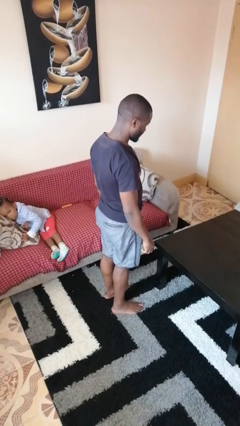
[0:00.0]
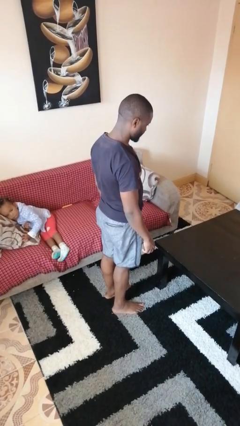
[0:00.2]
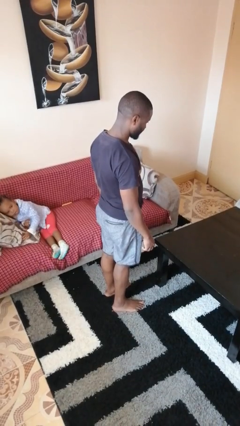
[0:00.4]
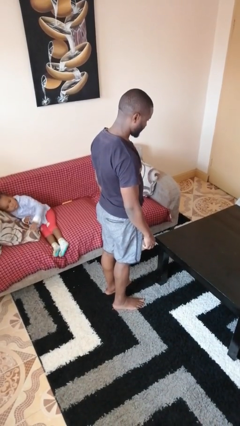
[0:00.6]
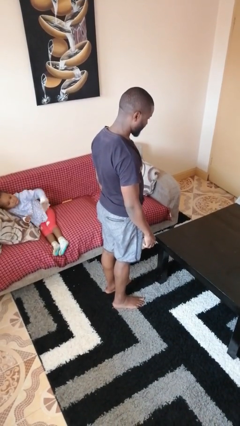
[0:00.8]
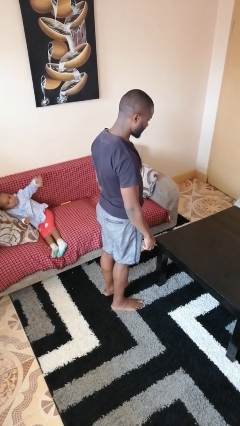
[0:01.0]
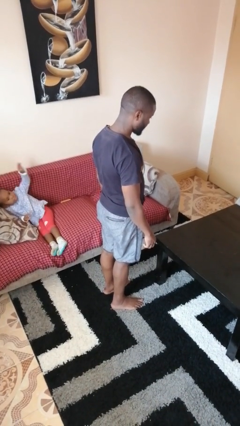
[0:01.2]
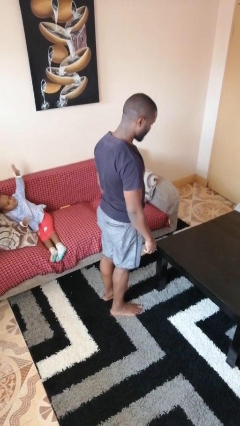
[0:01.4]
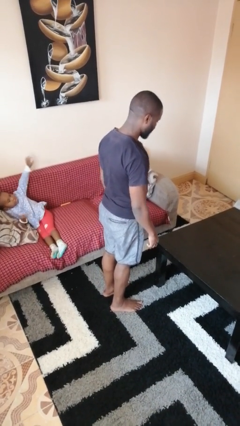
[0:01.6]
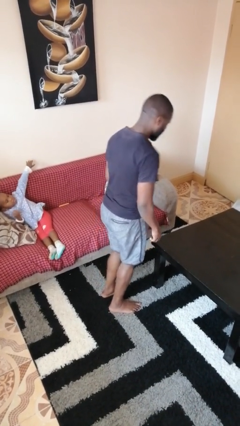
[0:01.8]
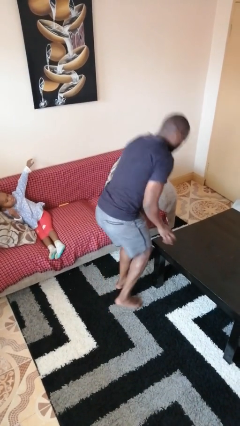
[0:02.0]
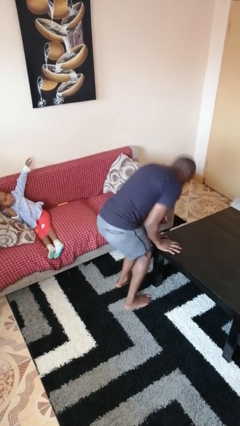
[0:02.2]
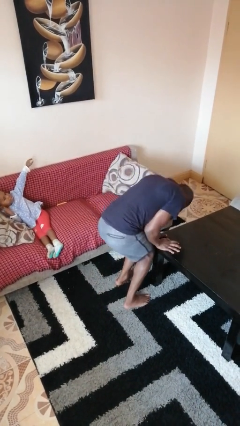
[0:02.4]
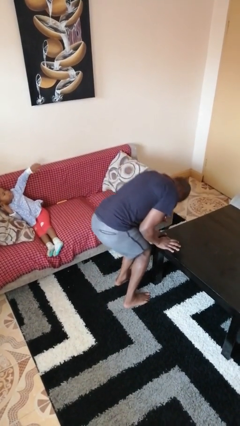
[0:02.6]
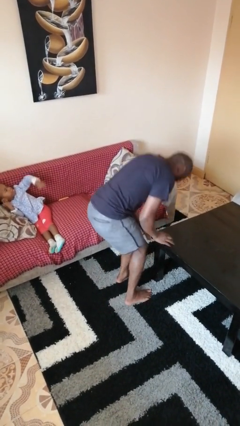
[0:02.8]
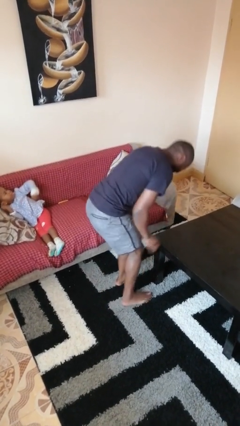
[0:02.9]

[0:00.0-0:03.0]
person bumps into table

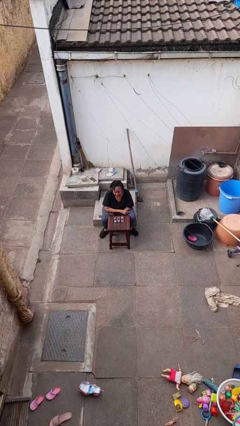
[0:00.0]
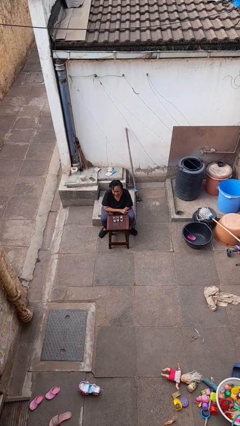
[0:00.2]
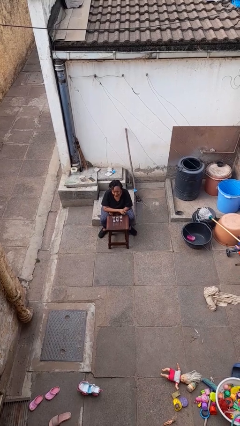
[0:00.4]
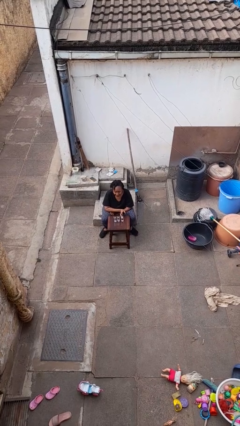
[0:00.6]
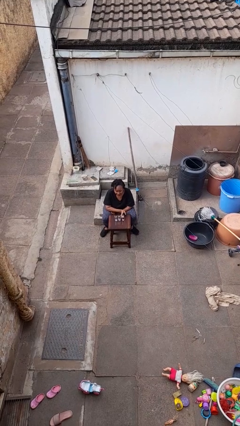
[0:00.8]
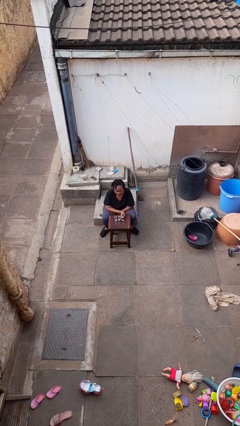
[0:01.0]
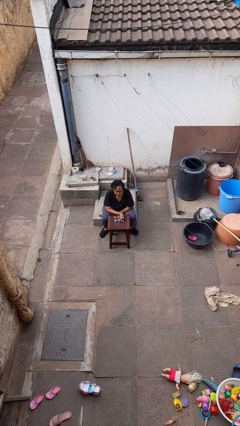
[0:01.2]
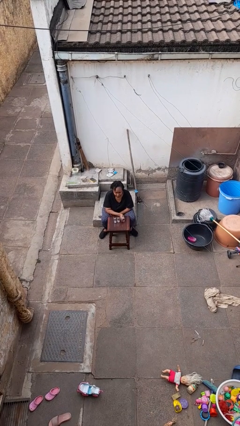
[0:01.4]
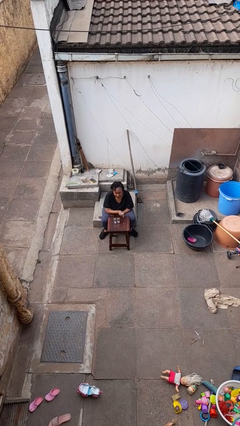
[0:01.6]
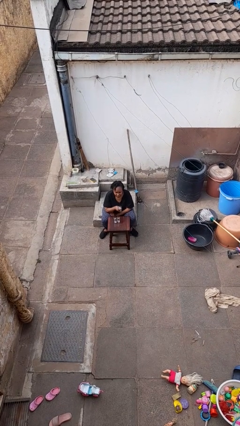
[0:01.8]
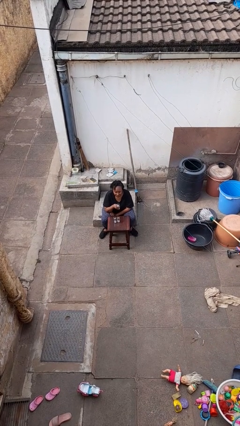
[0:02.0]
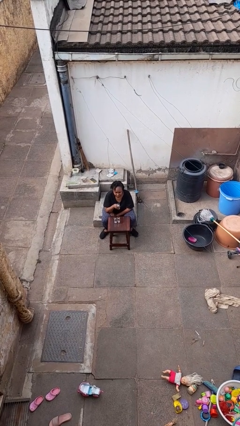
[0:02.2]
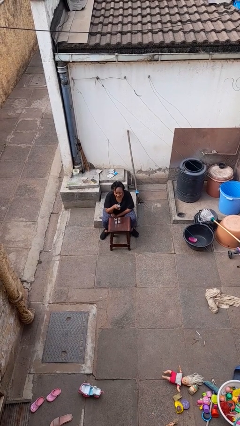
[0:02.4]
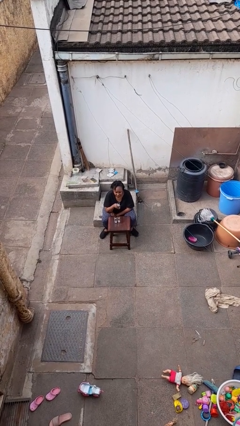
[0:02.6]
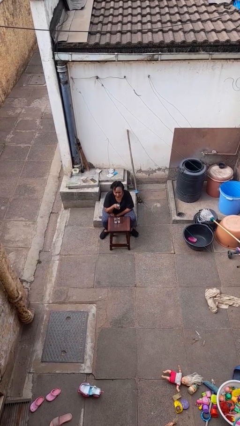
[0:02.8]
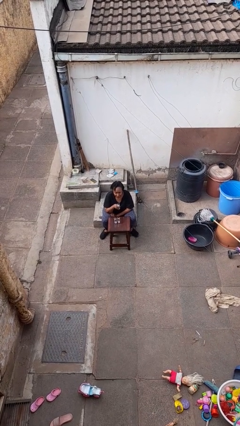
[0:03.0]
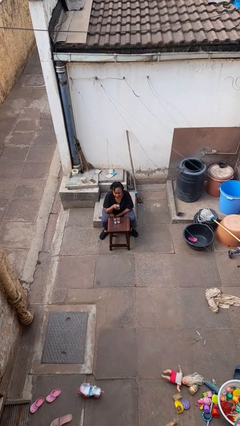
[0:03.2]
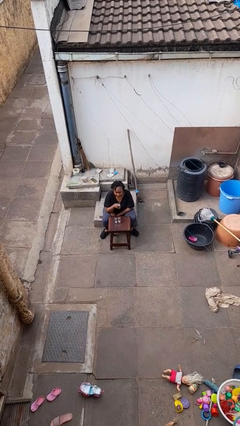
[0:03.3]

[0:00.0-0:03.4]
person picks up object from table

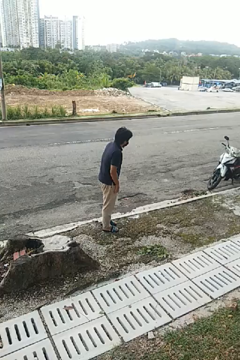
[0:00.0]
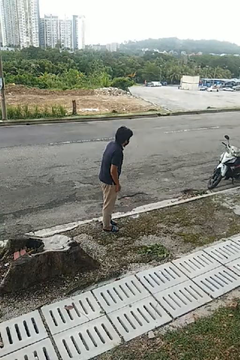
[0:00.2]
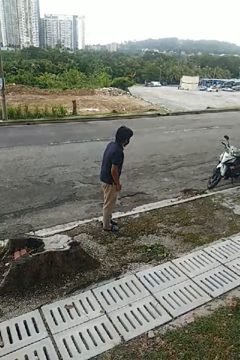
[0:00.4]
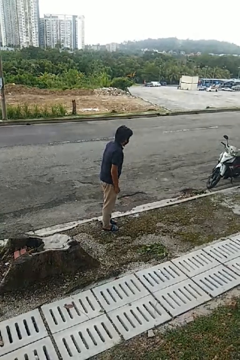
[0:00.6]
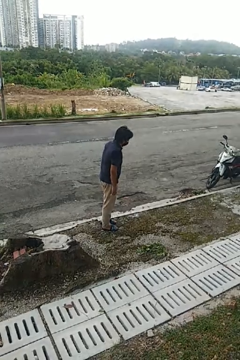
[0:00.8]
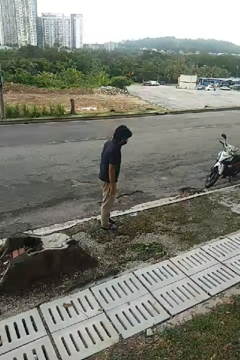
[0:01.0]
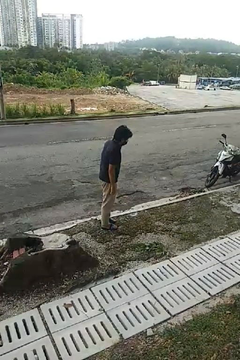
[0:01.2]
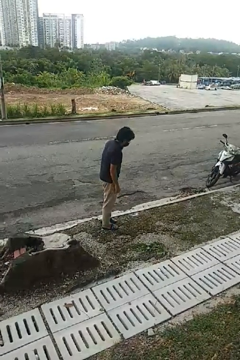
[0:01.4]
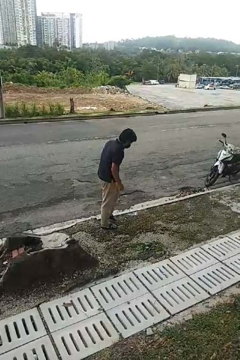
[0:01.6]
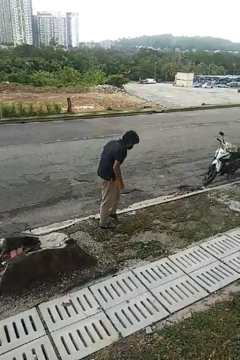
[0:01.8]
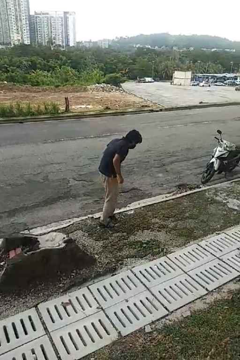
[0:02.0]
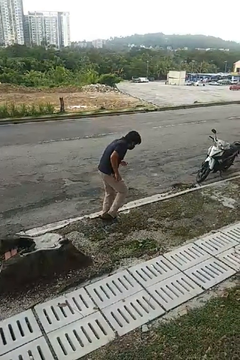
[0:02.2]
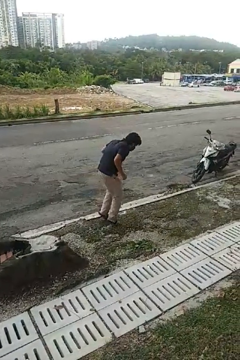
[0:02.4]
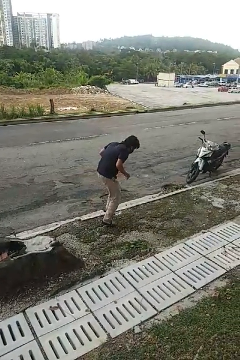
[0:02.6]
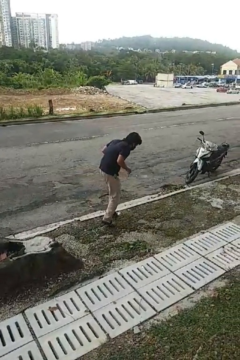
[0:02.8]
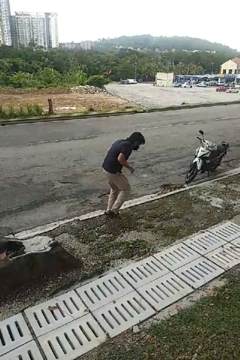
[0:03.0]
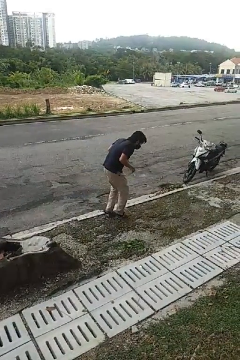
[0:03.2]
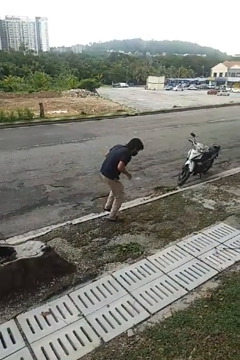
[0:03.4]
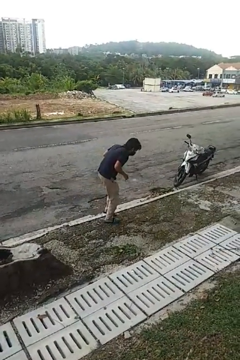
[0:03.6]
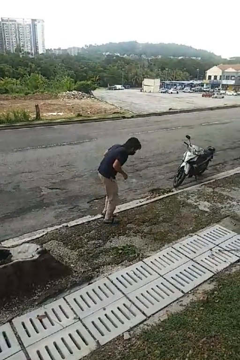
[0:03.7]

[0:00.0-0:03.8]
person walks tiptoe

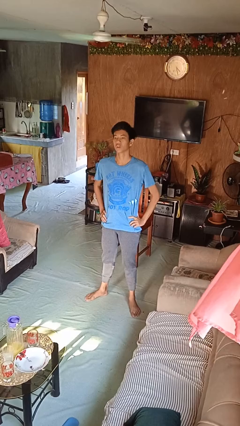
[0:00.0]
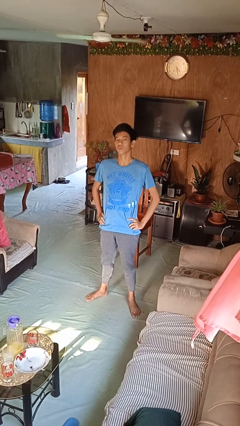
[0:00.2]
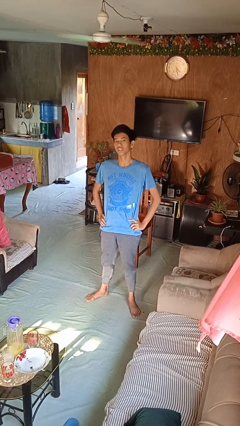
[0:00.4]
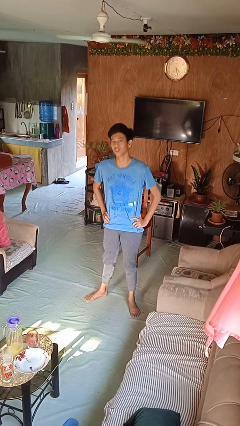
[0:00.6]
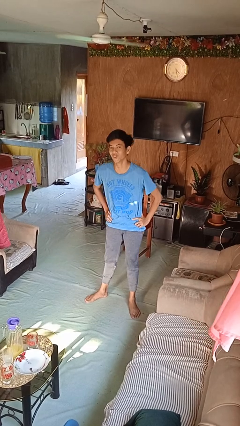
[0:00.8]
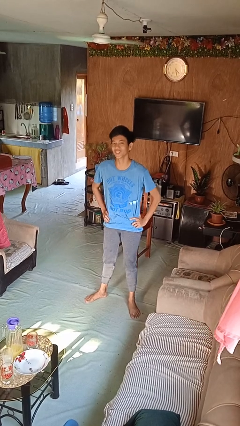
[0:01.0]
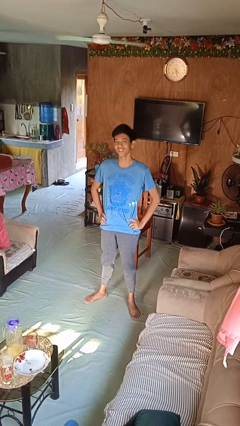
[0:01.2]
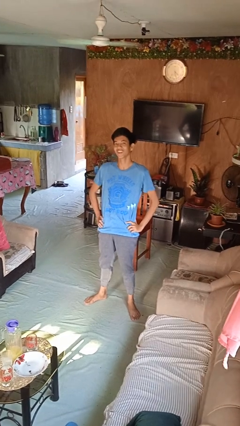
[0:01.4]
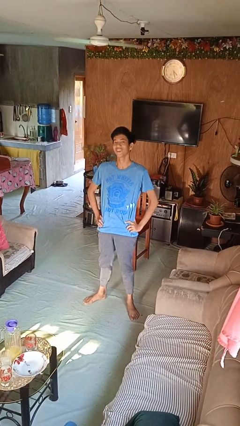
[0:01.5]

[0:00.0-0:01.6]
person wiggles hips

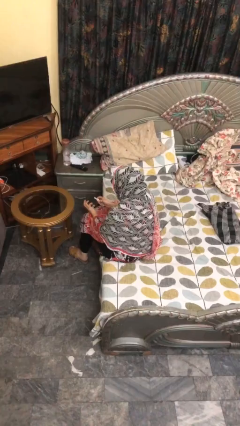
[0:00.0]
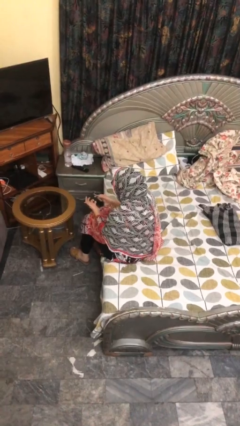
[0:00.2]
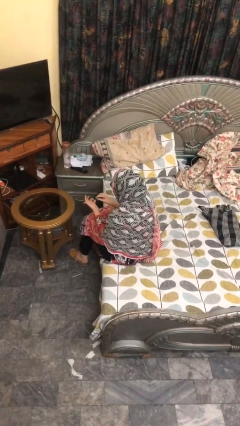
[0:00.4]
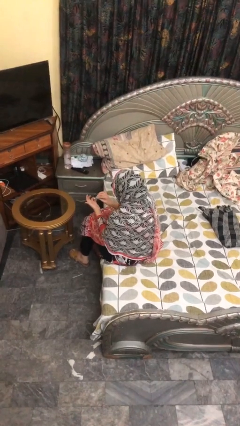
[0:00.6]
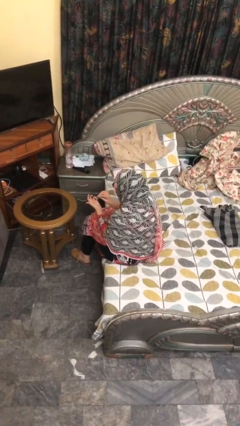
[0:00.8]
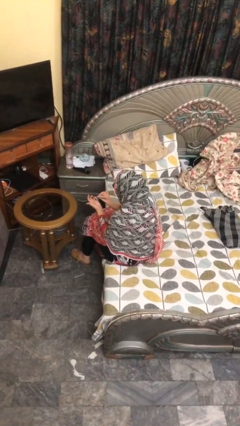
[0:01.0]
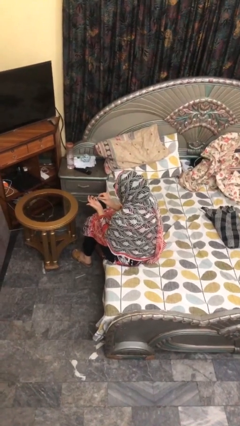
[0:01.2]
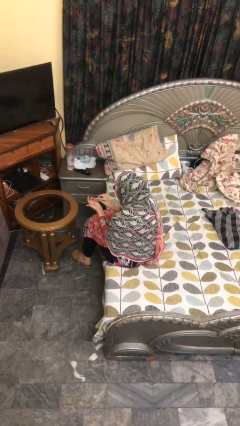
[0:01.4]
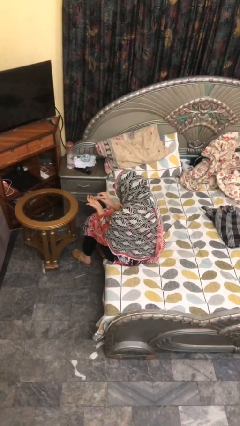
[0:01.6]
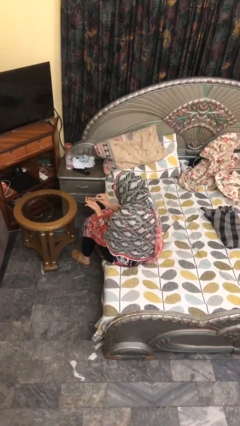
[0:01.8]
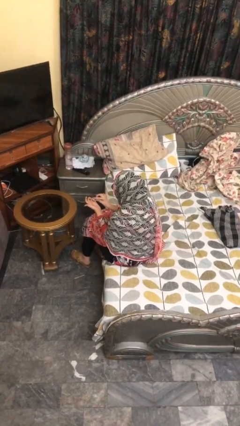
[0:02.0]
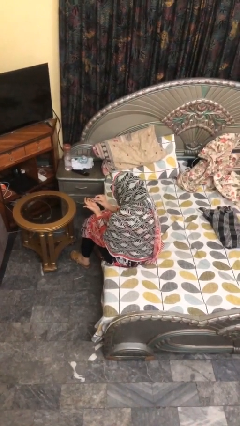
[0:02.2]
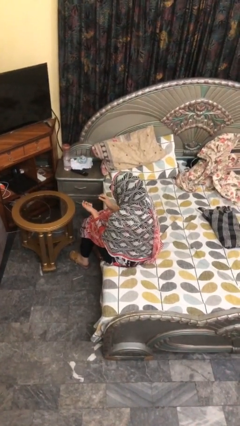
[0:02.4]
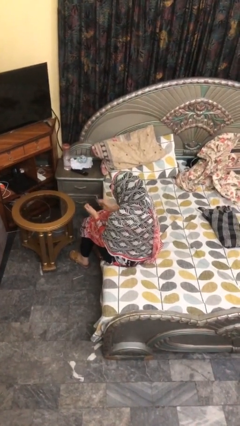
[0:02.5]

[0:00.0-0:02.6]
person files fingernails

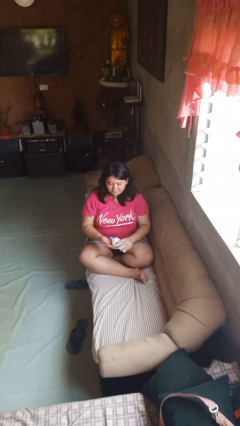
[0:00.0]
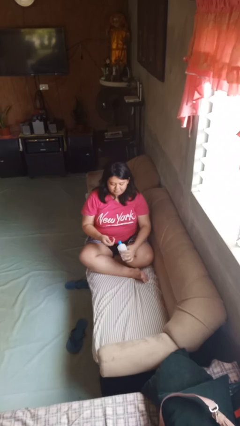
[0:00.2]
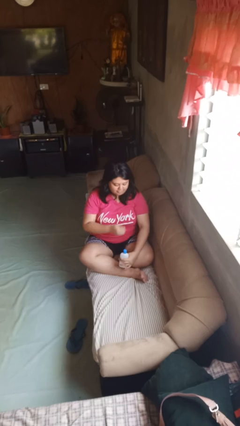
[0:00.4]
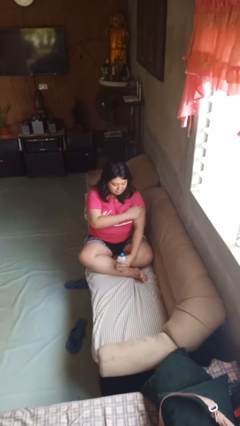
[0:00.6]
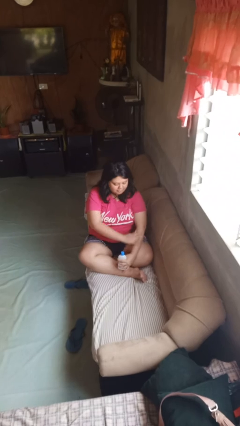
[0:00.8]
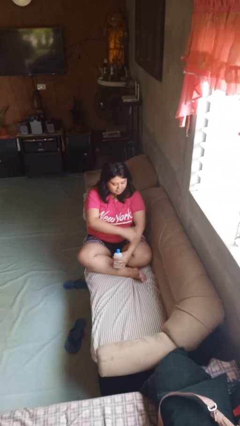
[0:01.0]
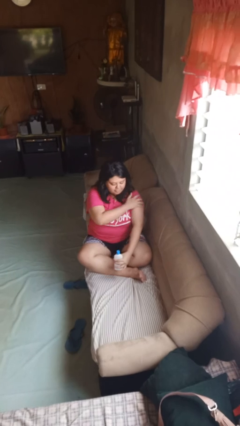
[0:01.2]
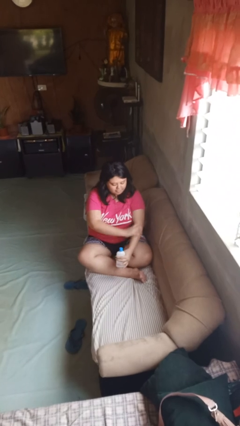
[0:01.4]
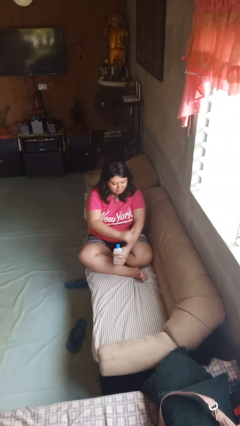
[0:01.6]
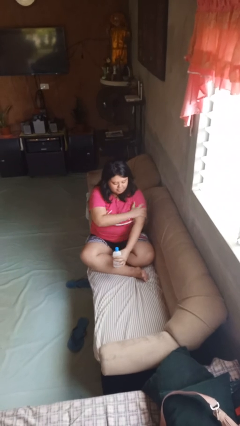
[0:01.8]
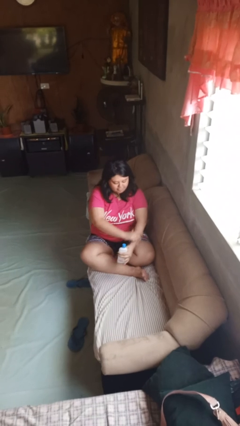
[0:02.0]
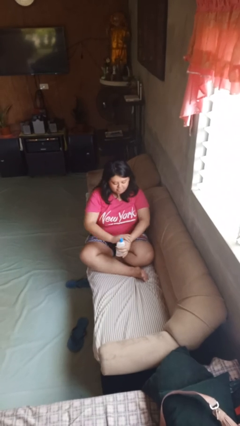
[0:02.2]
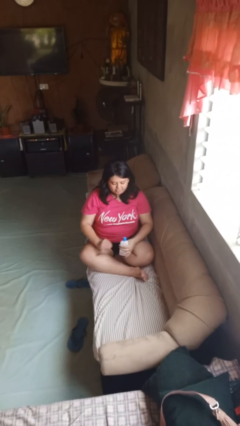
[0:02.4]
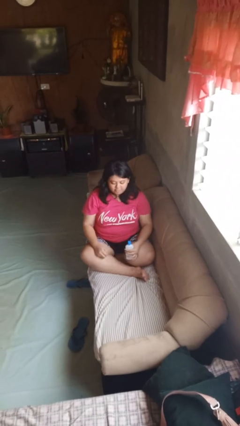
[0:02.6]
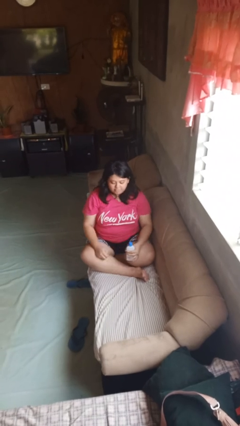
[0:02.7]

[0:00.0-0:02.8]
person applies sunscreen

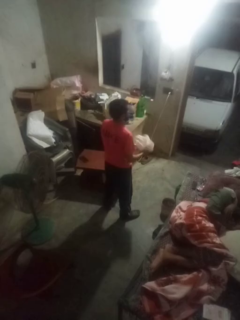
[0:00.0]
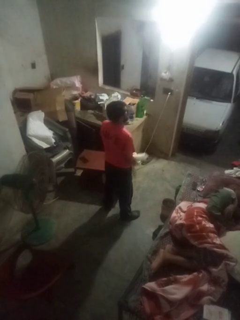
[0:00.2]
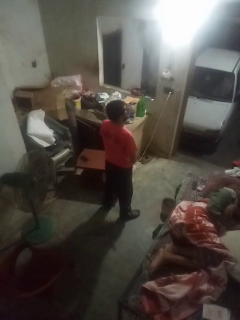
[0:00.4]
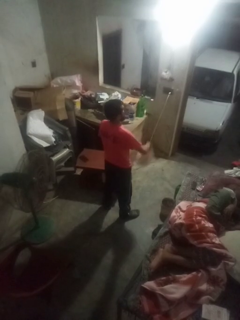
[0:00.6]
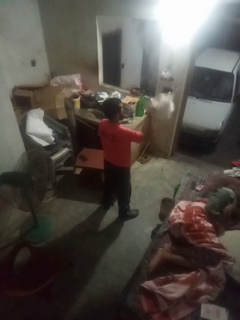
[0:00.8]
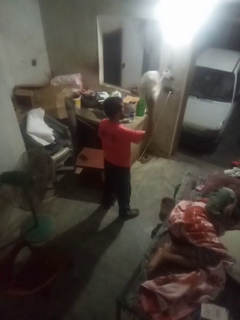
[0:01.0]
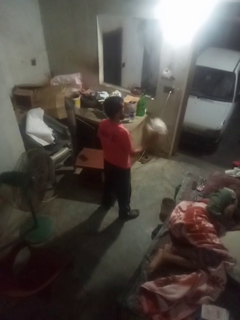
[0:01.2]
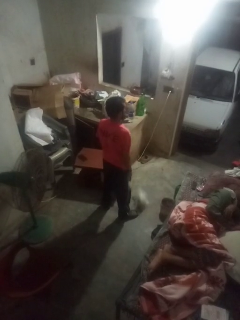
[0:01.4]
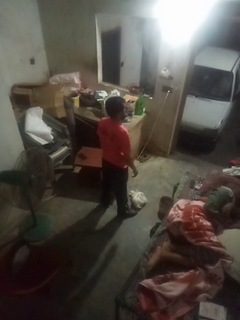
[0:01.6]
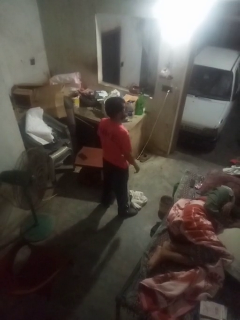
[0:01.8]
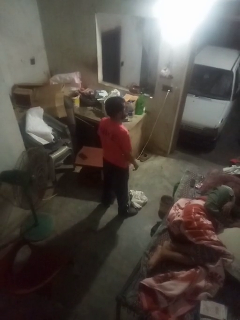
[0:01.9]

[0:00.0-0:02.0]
person throws object to ground
